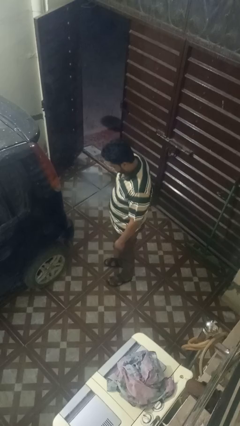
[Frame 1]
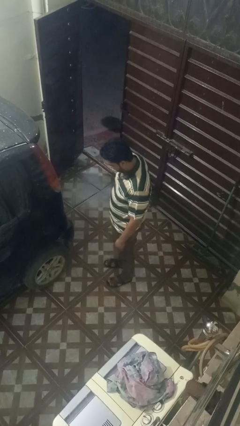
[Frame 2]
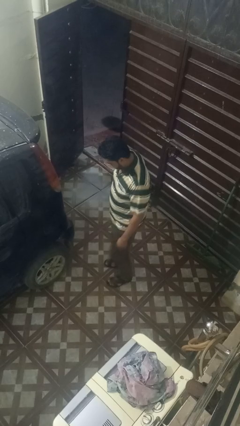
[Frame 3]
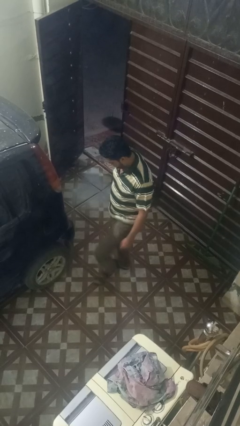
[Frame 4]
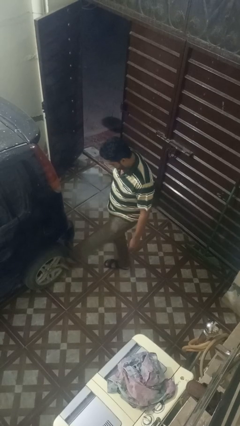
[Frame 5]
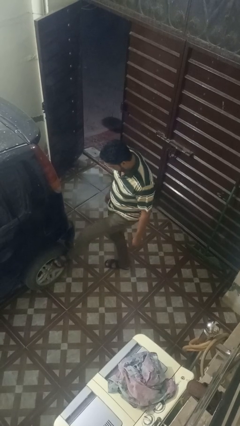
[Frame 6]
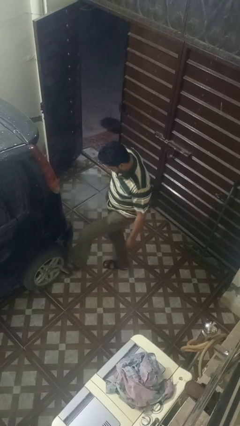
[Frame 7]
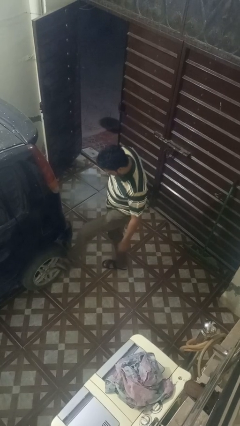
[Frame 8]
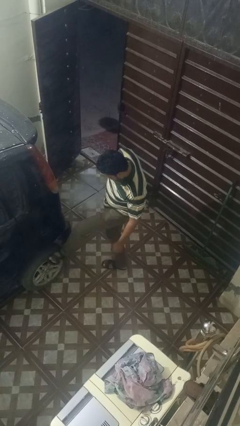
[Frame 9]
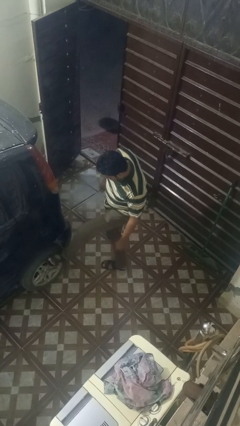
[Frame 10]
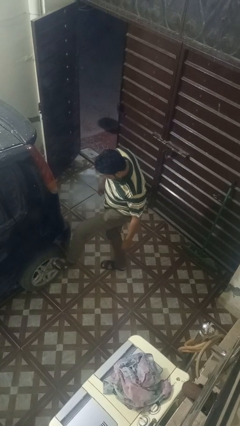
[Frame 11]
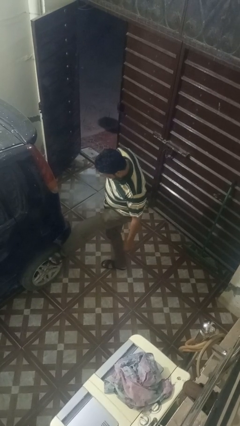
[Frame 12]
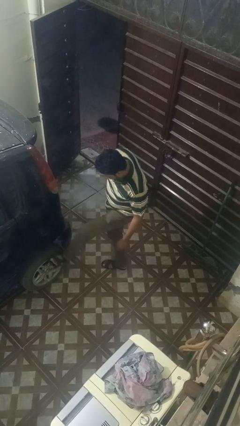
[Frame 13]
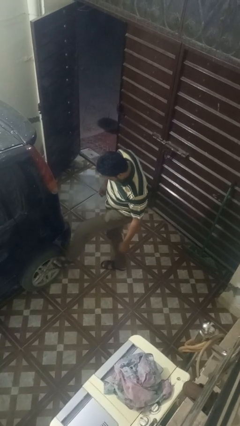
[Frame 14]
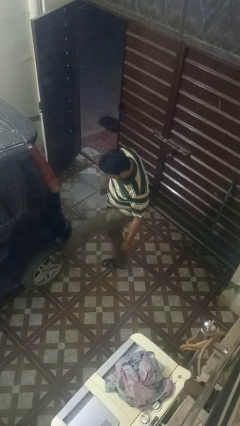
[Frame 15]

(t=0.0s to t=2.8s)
person kicks car tires

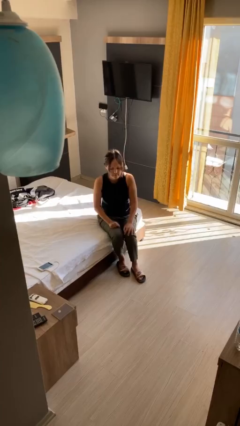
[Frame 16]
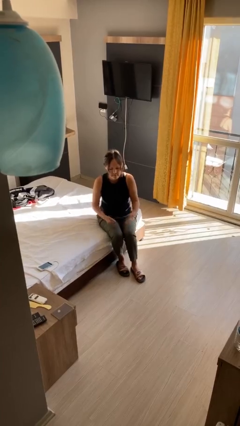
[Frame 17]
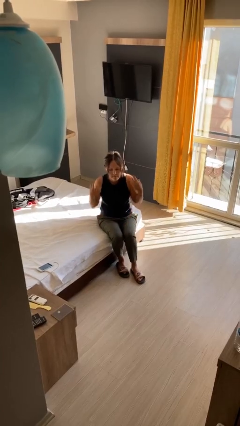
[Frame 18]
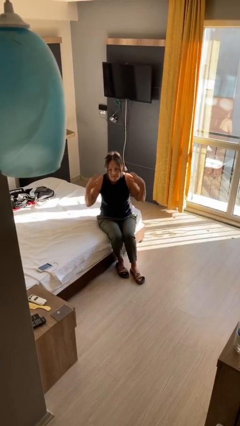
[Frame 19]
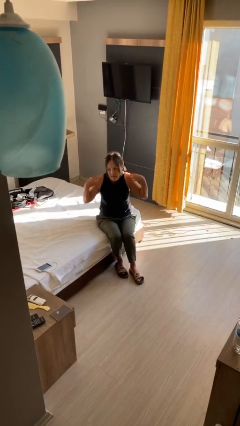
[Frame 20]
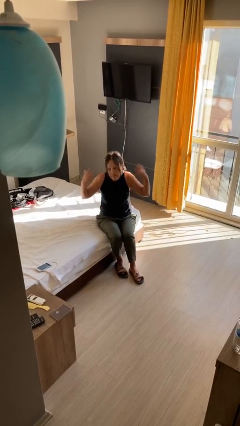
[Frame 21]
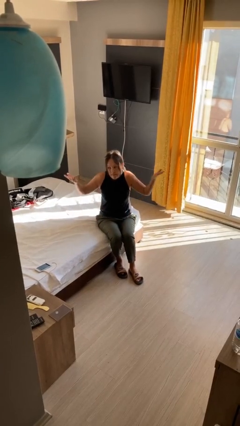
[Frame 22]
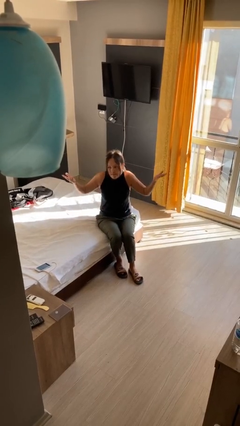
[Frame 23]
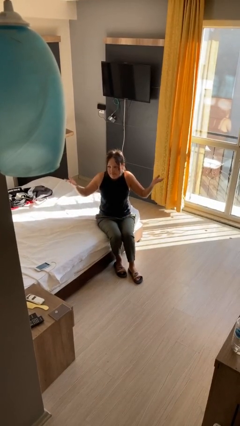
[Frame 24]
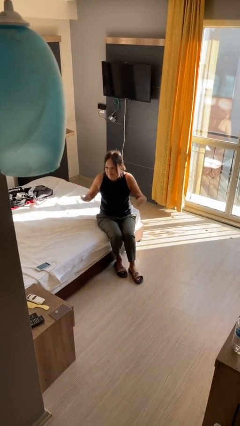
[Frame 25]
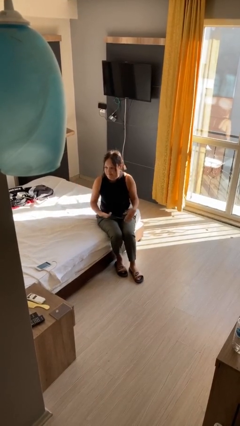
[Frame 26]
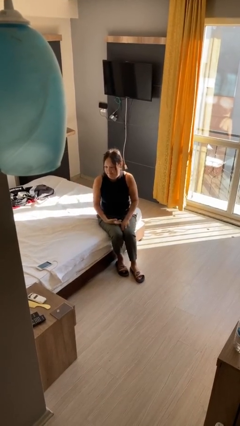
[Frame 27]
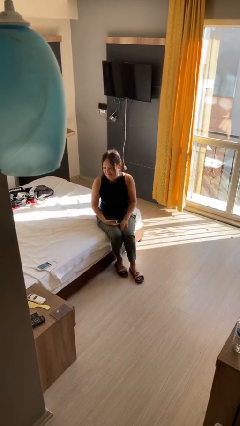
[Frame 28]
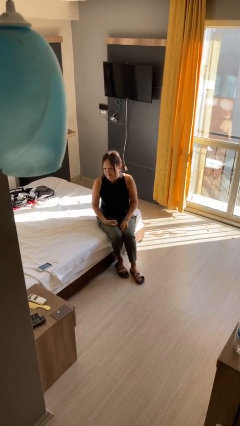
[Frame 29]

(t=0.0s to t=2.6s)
person shrugs

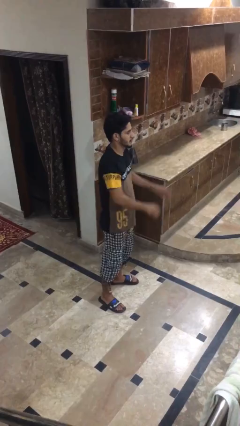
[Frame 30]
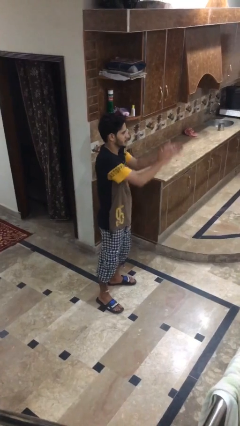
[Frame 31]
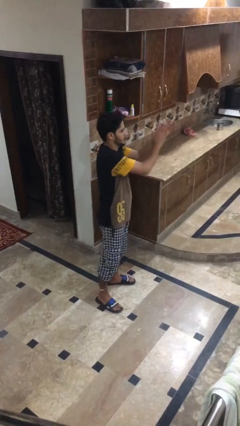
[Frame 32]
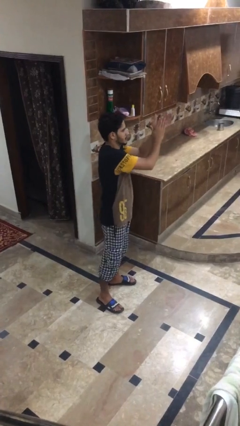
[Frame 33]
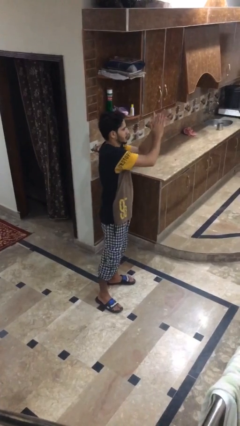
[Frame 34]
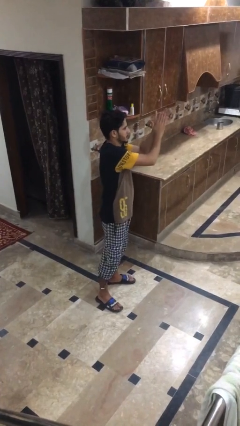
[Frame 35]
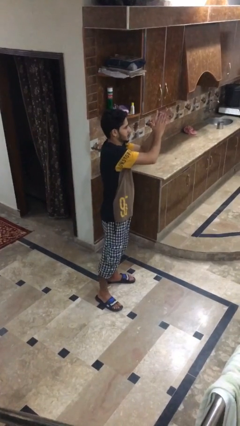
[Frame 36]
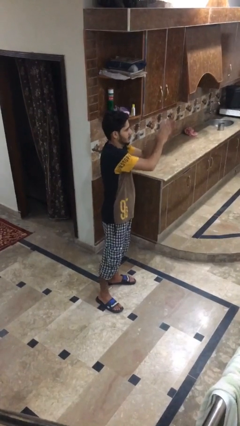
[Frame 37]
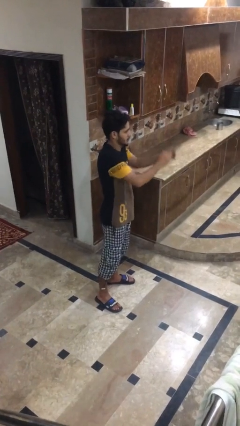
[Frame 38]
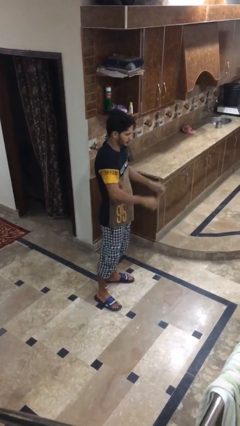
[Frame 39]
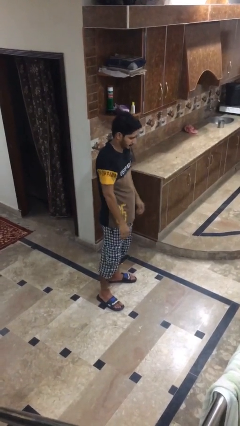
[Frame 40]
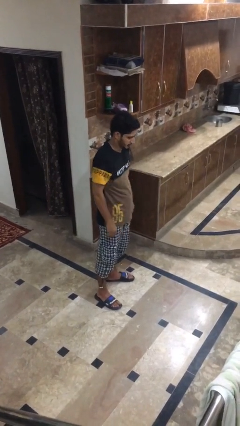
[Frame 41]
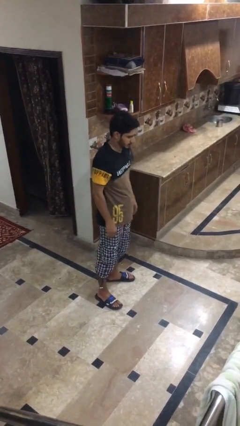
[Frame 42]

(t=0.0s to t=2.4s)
person claps hands

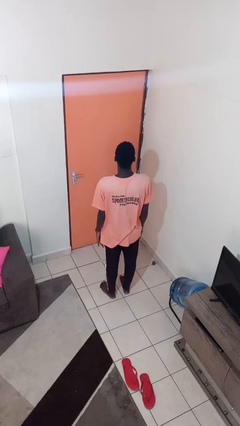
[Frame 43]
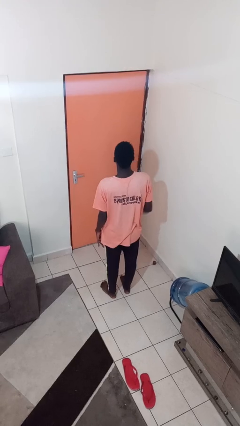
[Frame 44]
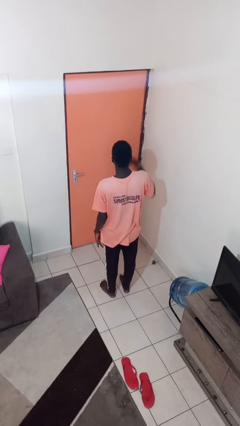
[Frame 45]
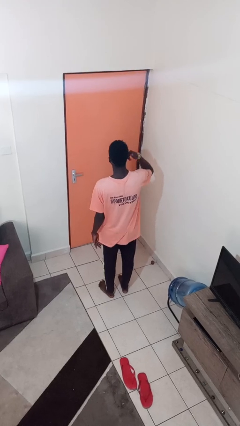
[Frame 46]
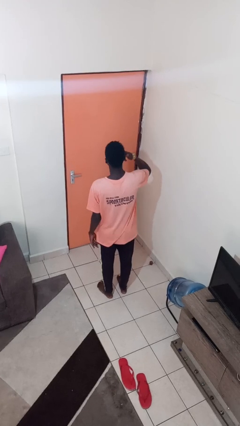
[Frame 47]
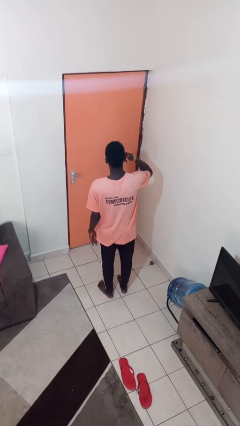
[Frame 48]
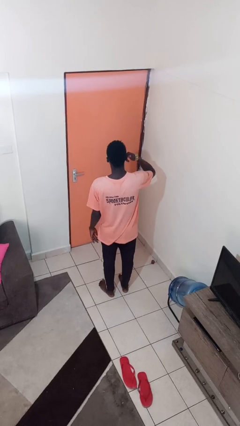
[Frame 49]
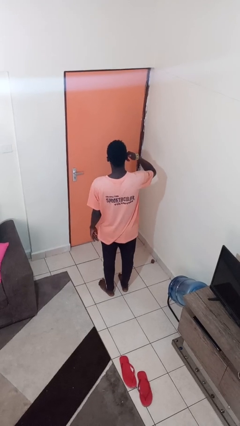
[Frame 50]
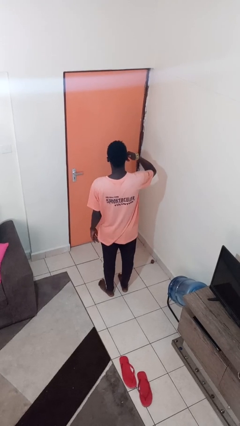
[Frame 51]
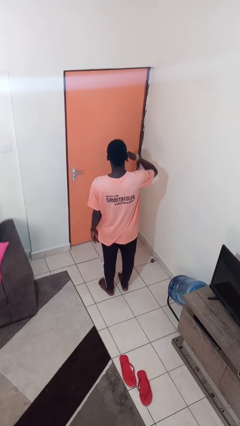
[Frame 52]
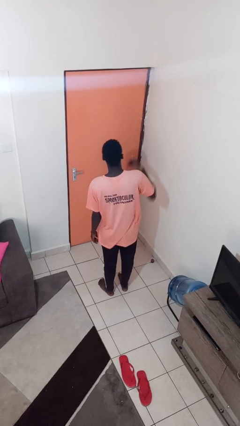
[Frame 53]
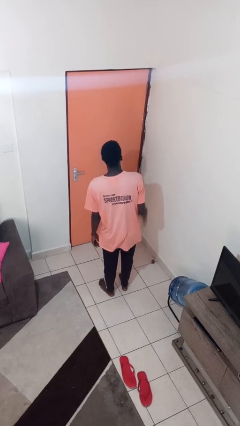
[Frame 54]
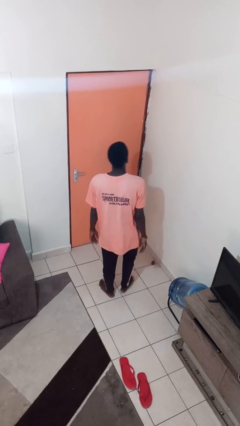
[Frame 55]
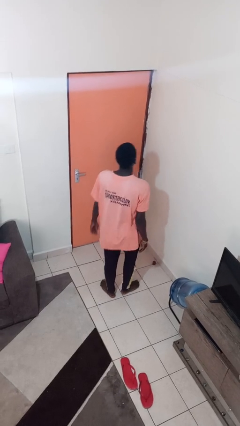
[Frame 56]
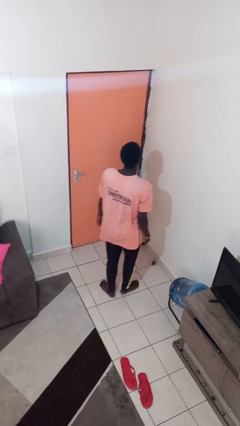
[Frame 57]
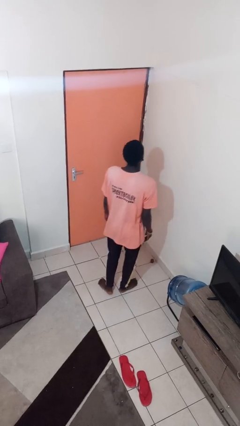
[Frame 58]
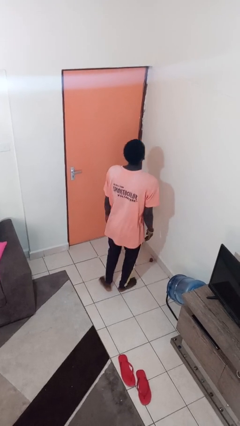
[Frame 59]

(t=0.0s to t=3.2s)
person gestures call me

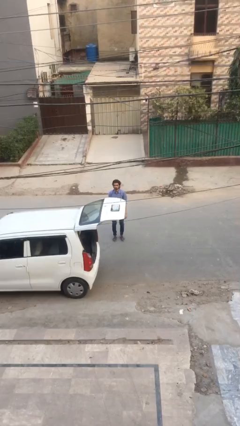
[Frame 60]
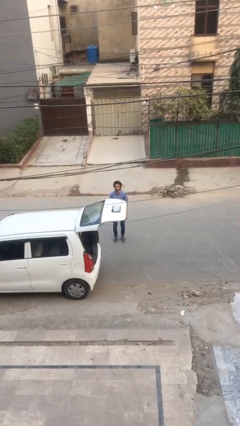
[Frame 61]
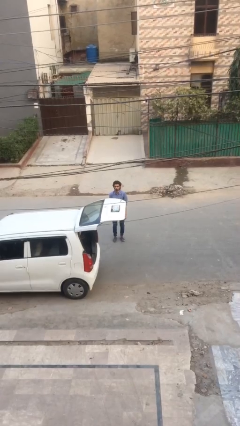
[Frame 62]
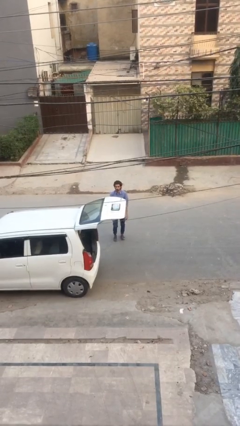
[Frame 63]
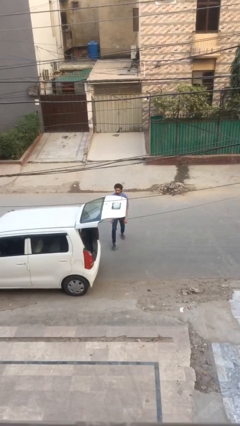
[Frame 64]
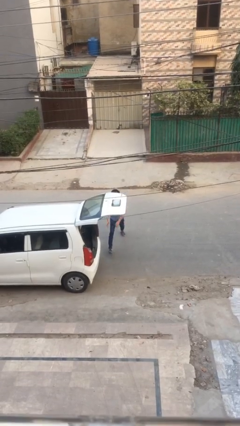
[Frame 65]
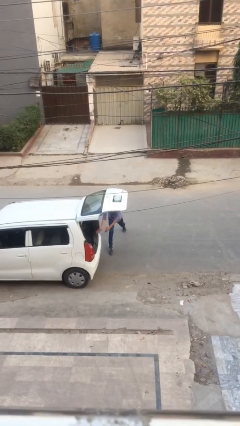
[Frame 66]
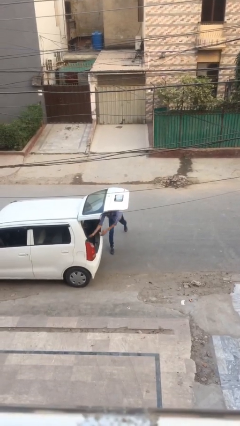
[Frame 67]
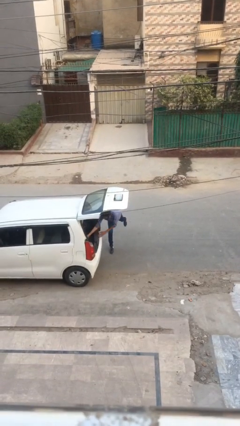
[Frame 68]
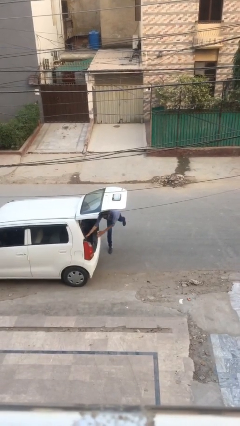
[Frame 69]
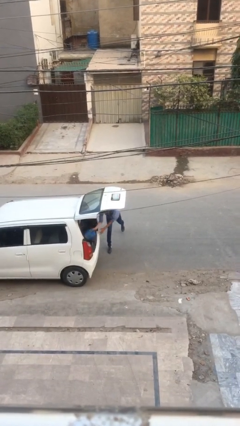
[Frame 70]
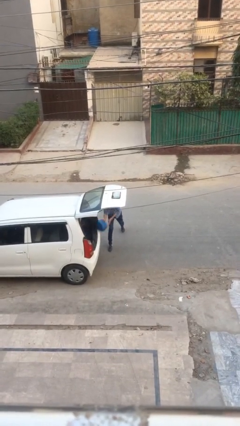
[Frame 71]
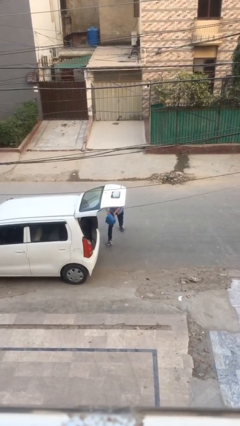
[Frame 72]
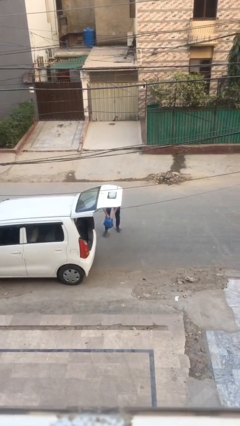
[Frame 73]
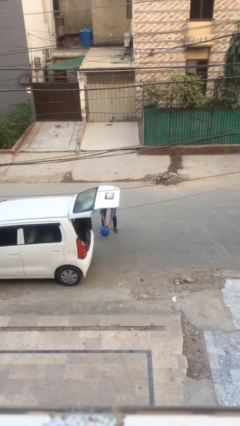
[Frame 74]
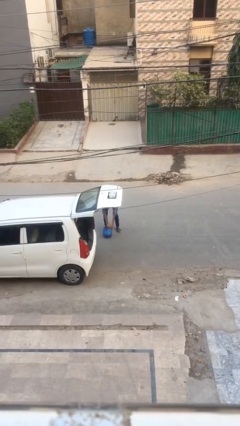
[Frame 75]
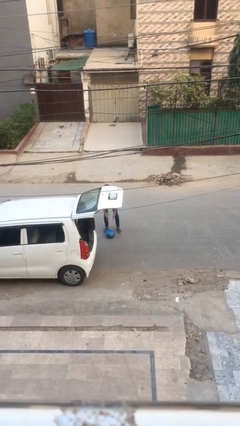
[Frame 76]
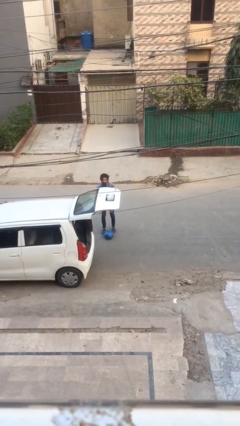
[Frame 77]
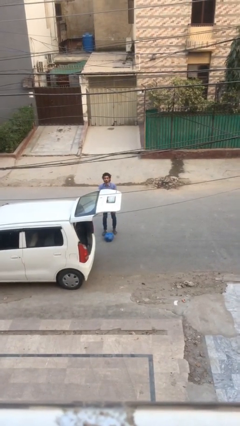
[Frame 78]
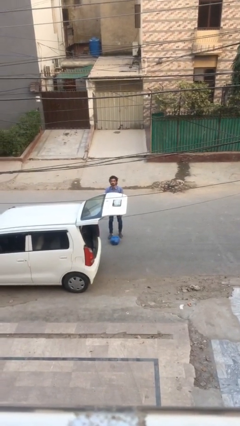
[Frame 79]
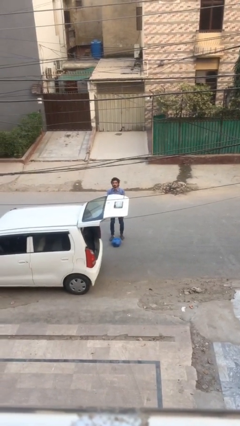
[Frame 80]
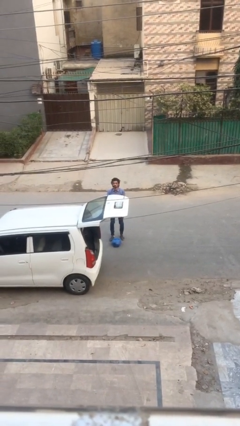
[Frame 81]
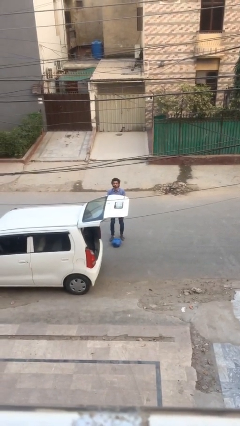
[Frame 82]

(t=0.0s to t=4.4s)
person unloads car

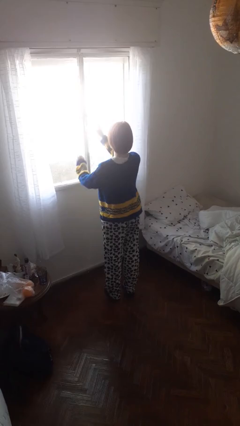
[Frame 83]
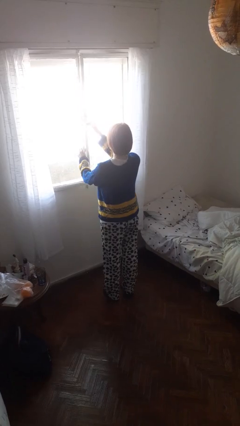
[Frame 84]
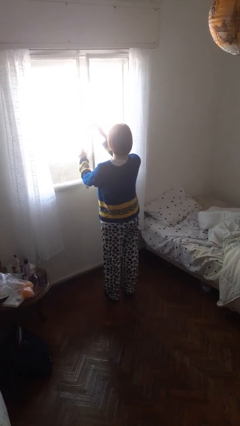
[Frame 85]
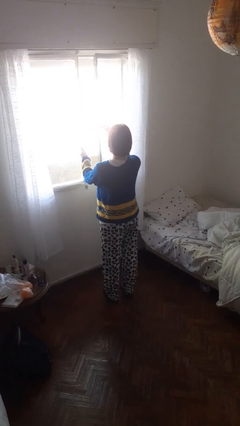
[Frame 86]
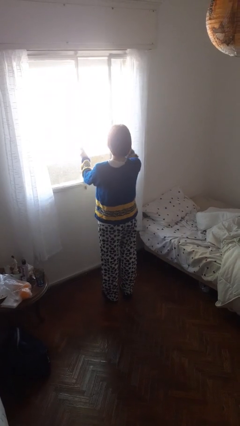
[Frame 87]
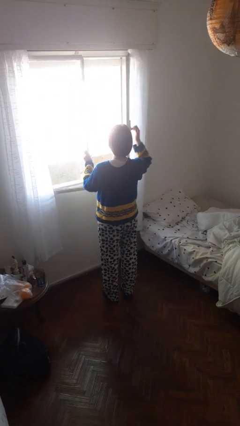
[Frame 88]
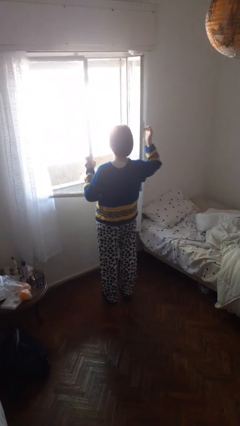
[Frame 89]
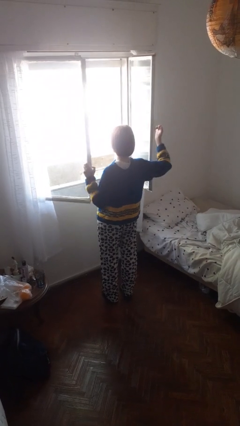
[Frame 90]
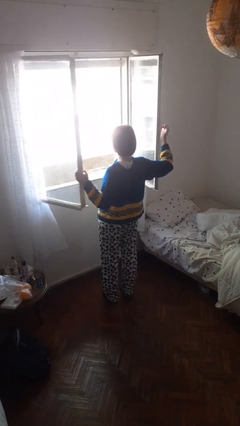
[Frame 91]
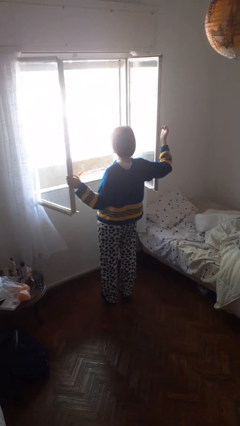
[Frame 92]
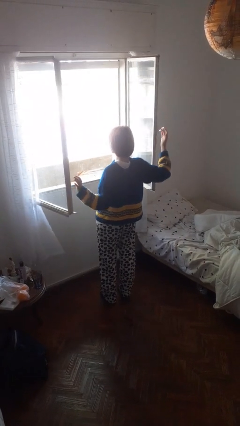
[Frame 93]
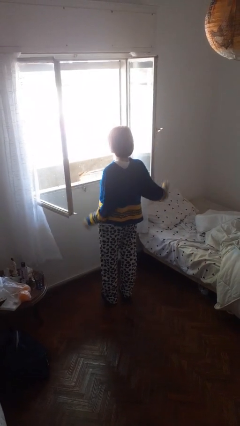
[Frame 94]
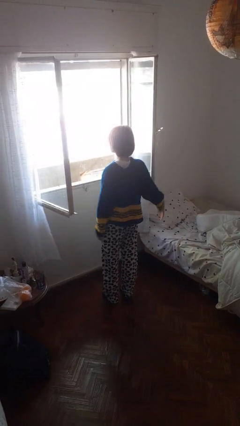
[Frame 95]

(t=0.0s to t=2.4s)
person opens home window

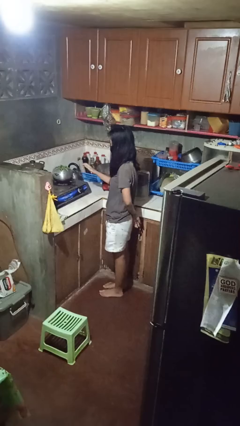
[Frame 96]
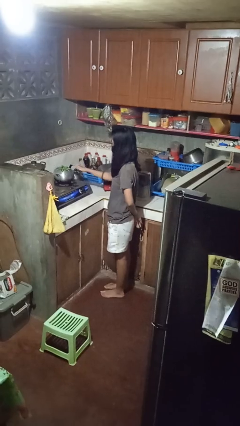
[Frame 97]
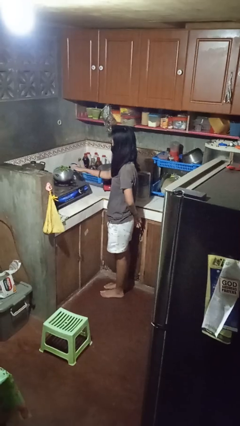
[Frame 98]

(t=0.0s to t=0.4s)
person burns hand
